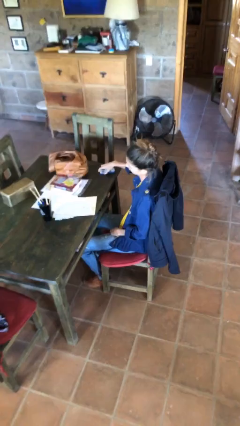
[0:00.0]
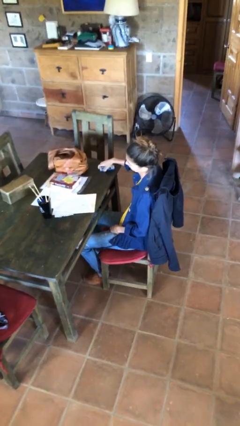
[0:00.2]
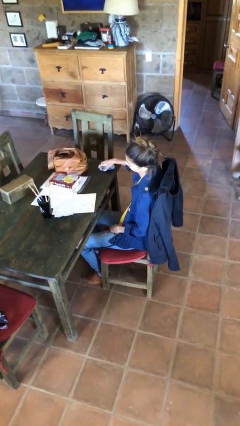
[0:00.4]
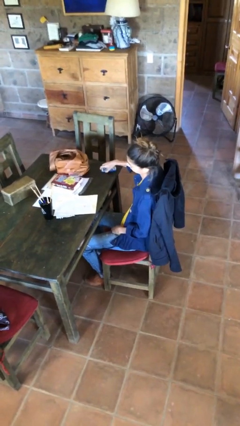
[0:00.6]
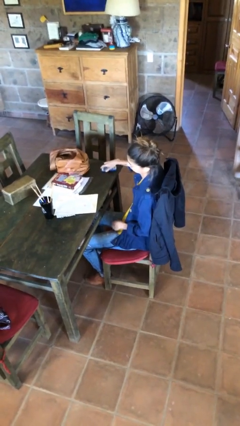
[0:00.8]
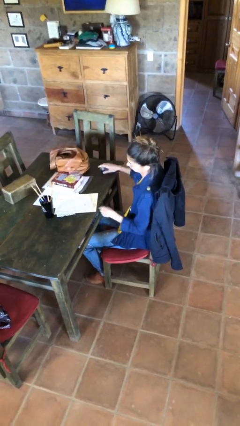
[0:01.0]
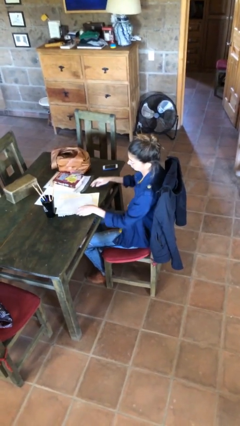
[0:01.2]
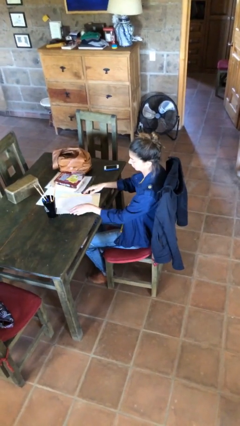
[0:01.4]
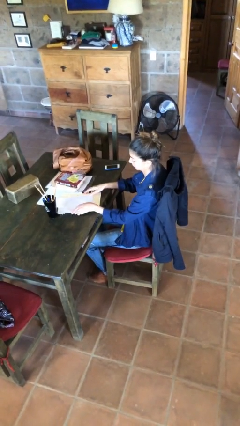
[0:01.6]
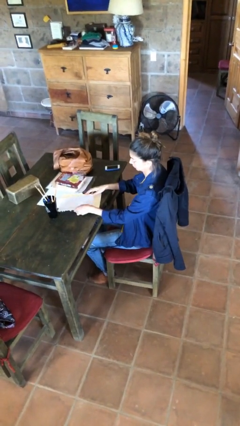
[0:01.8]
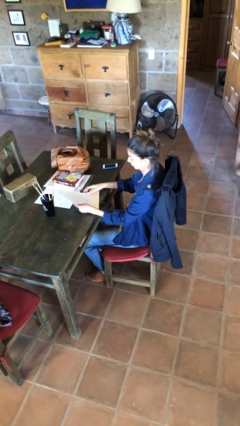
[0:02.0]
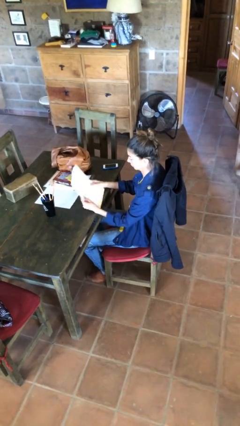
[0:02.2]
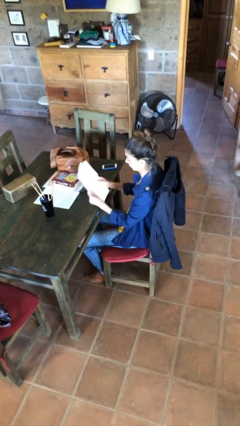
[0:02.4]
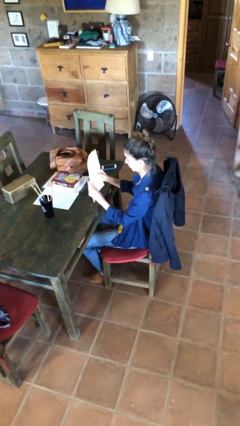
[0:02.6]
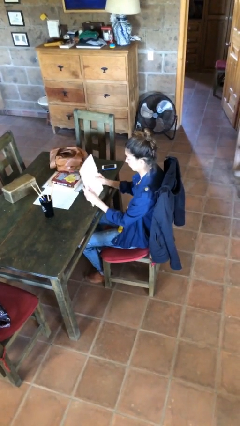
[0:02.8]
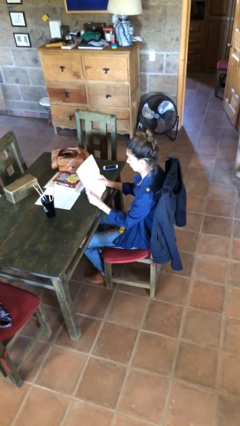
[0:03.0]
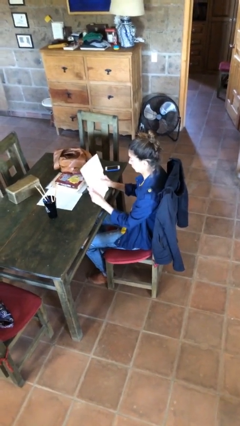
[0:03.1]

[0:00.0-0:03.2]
person picks up object from table

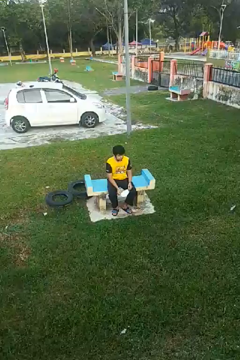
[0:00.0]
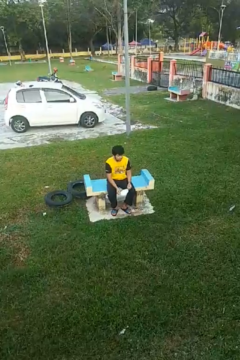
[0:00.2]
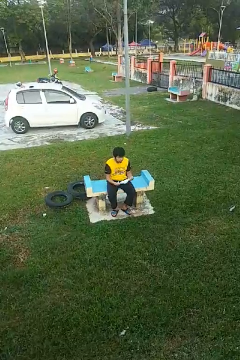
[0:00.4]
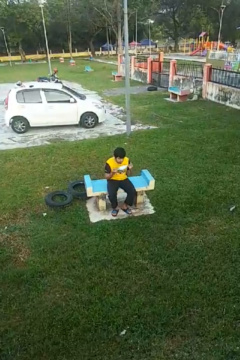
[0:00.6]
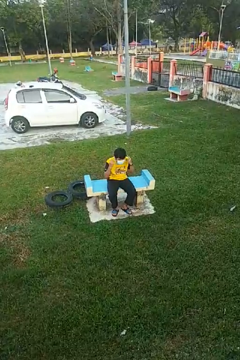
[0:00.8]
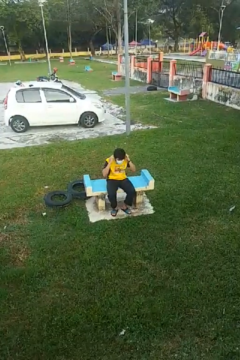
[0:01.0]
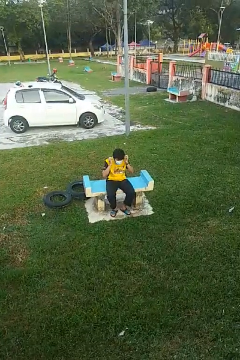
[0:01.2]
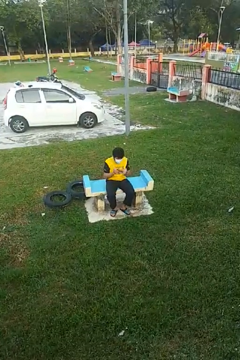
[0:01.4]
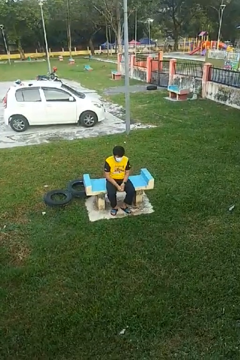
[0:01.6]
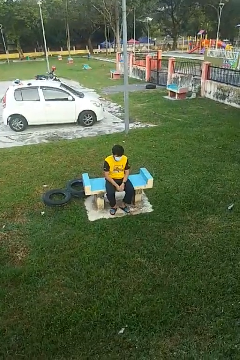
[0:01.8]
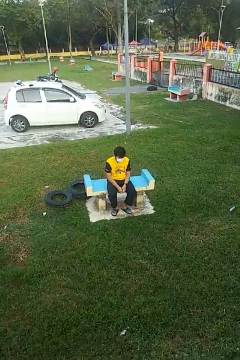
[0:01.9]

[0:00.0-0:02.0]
person puts on facemask

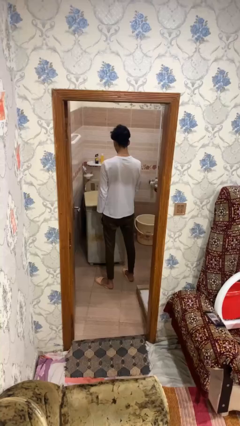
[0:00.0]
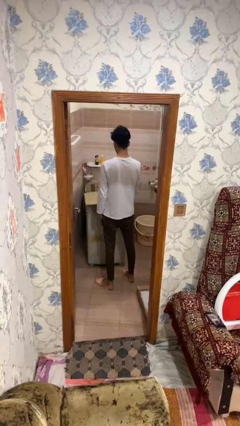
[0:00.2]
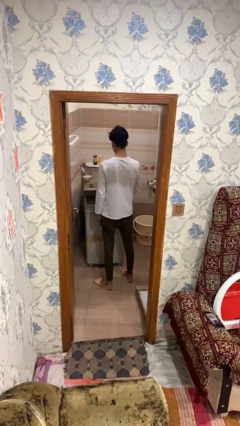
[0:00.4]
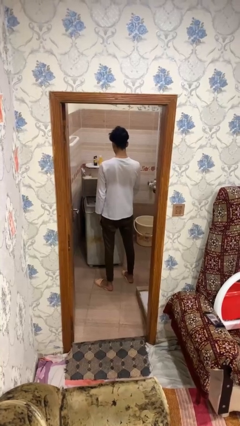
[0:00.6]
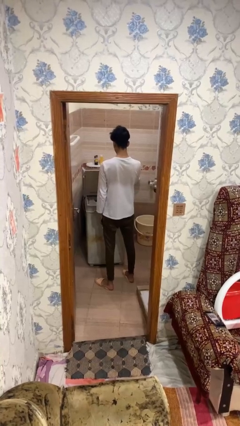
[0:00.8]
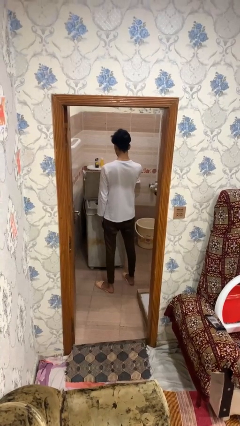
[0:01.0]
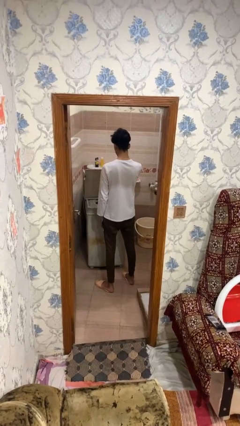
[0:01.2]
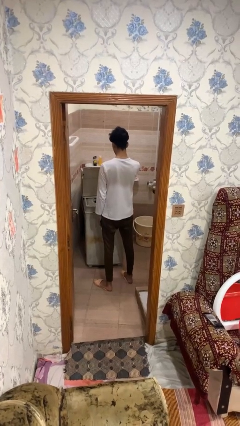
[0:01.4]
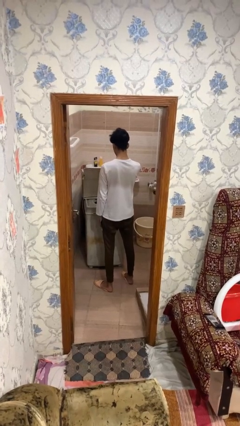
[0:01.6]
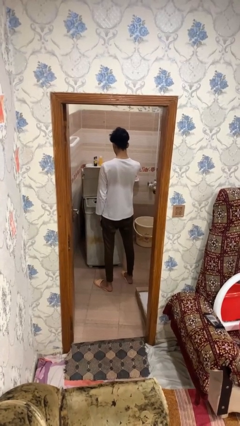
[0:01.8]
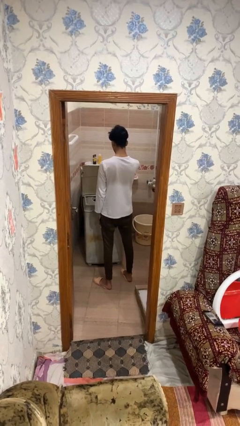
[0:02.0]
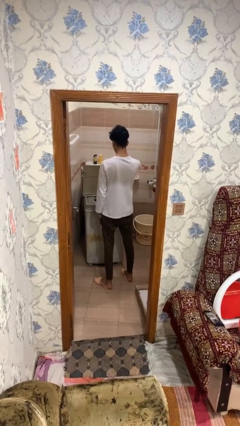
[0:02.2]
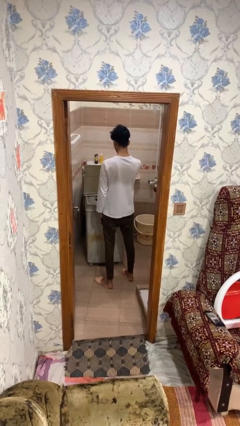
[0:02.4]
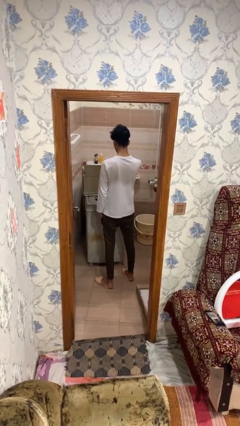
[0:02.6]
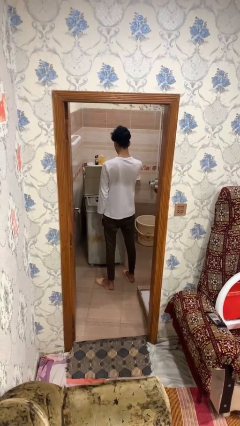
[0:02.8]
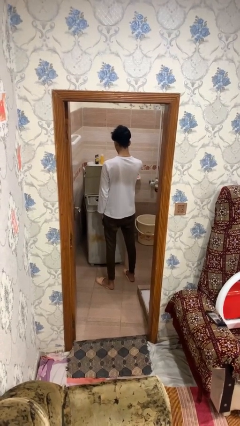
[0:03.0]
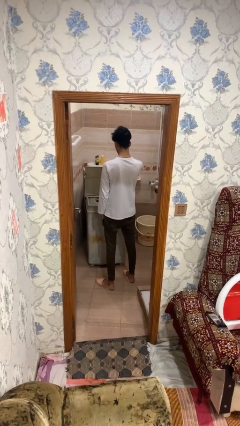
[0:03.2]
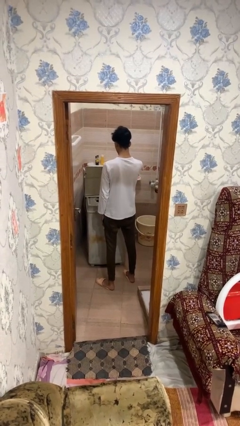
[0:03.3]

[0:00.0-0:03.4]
person opens clothes washer

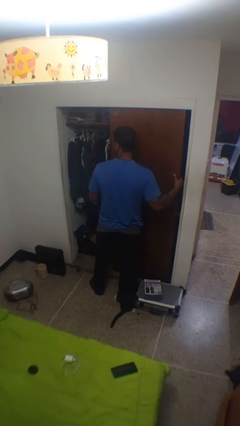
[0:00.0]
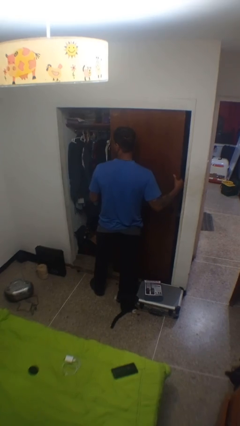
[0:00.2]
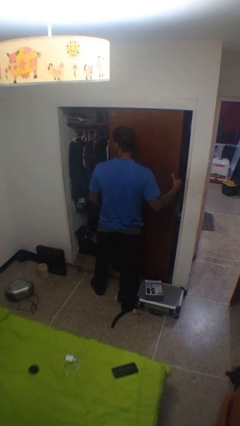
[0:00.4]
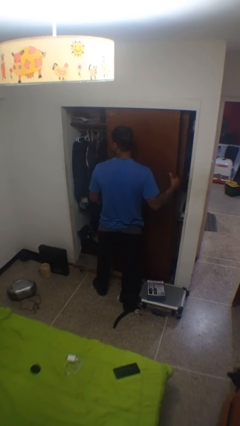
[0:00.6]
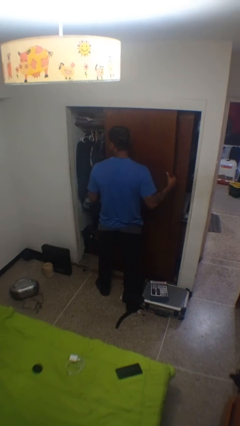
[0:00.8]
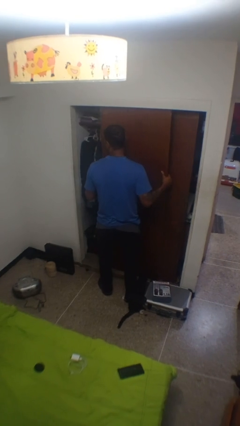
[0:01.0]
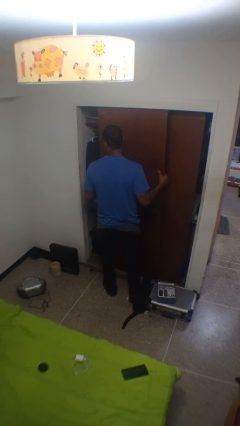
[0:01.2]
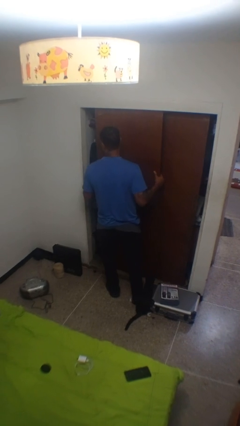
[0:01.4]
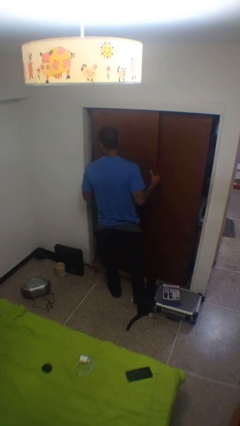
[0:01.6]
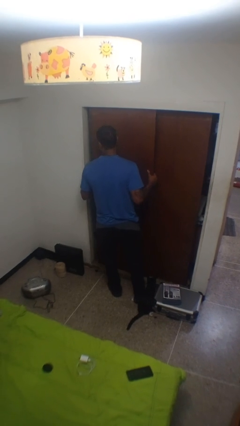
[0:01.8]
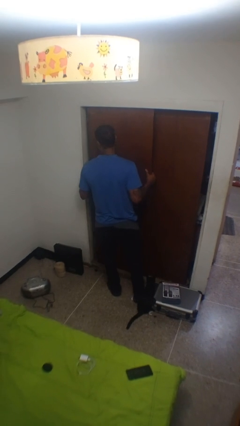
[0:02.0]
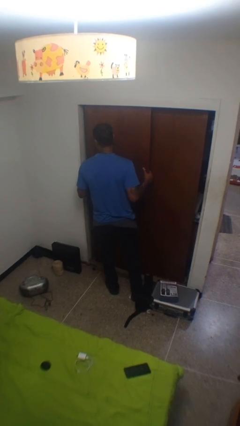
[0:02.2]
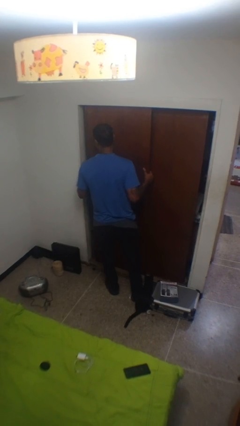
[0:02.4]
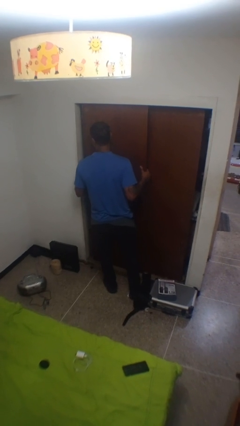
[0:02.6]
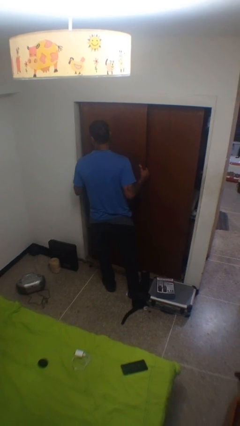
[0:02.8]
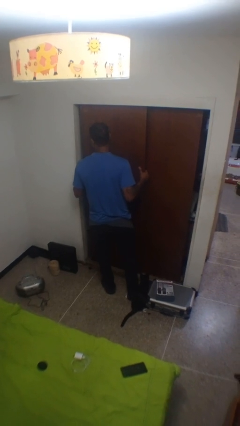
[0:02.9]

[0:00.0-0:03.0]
person closes closet door

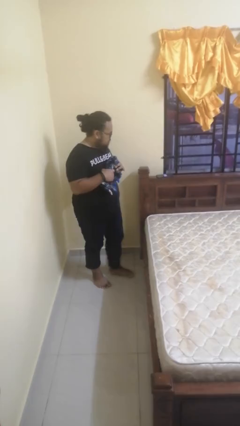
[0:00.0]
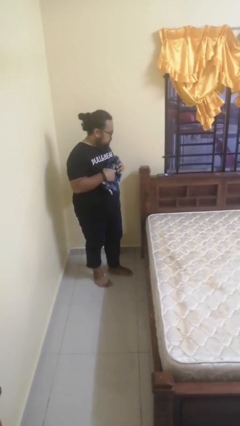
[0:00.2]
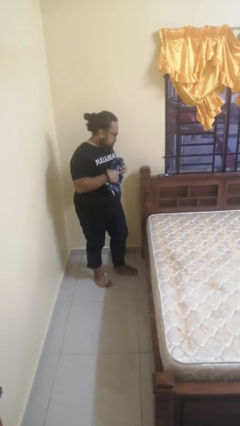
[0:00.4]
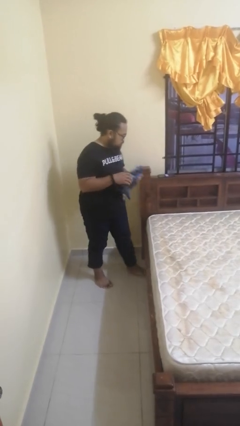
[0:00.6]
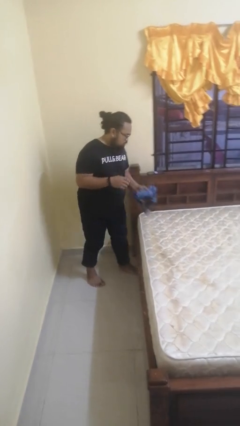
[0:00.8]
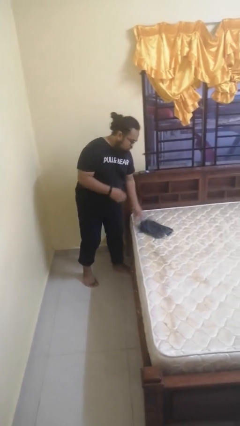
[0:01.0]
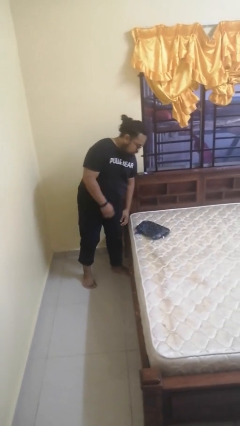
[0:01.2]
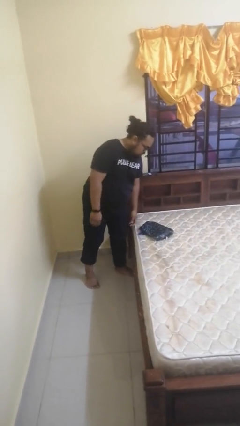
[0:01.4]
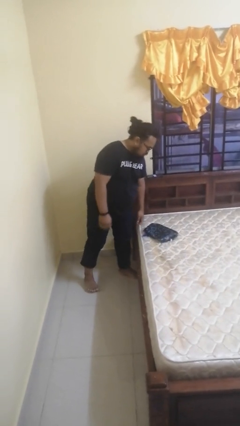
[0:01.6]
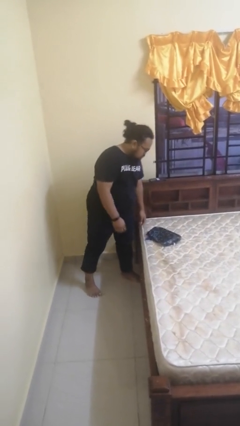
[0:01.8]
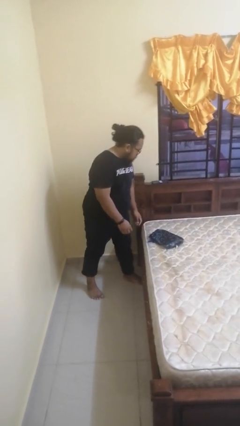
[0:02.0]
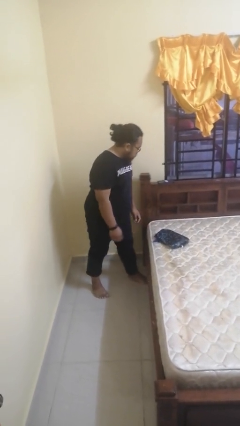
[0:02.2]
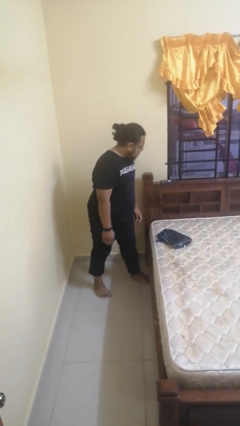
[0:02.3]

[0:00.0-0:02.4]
person puts down object on bed

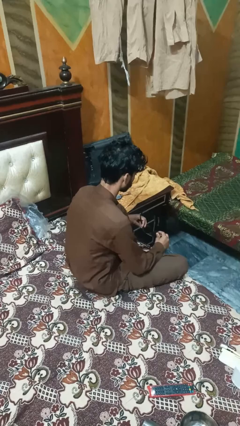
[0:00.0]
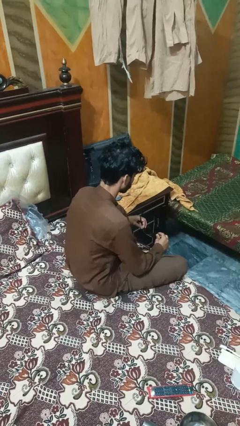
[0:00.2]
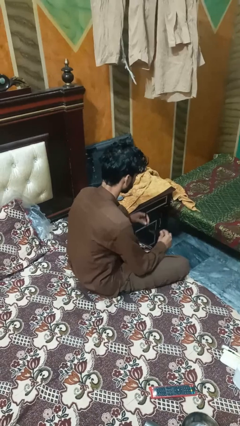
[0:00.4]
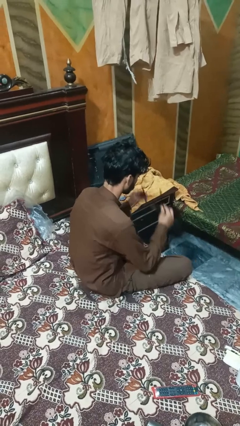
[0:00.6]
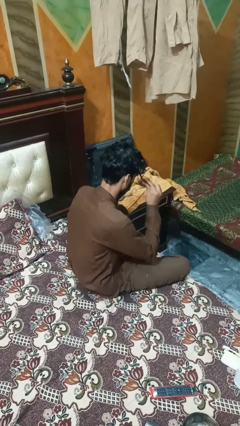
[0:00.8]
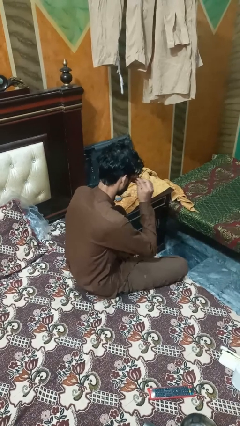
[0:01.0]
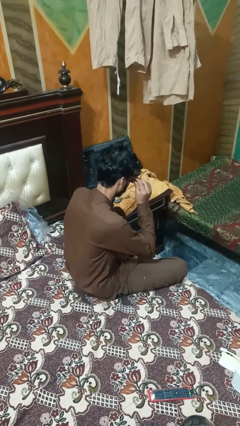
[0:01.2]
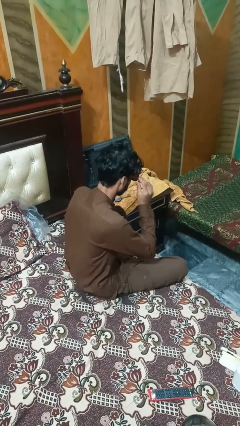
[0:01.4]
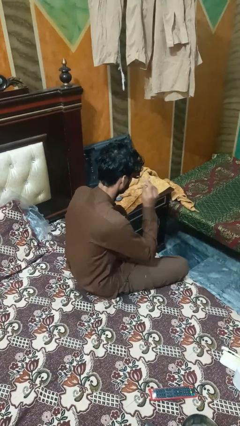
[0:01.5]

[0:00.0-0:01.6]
person puts on sunglasses

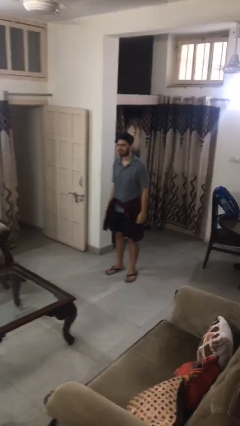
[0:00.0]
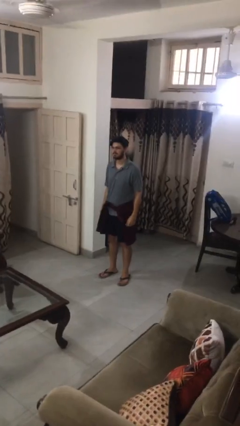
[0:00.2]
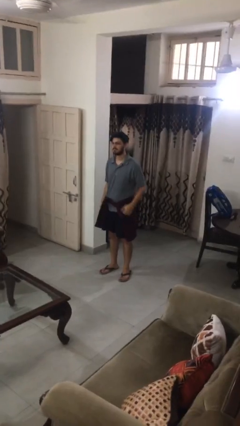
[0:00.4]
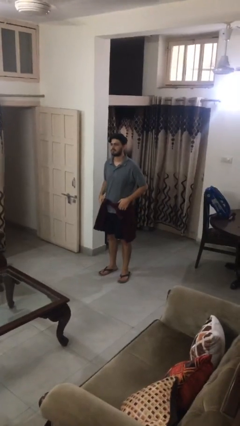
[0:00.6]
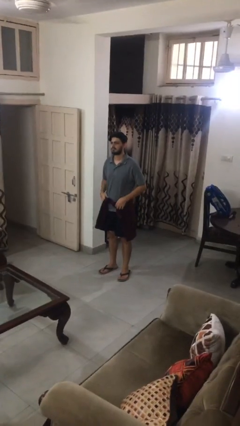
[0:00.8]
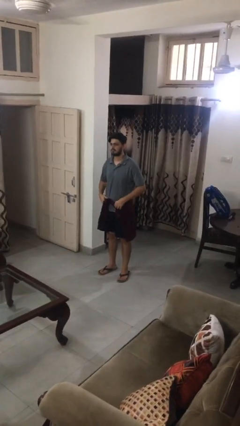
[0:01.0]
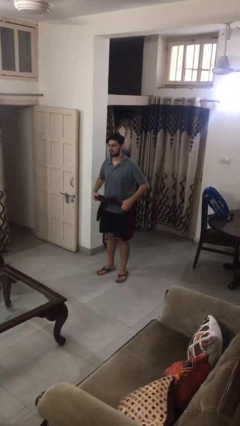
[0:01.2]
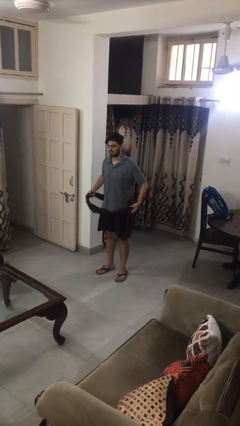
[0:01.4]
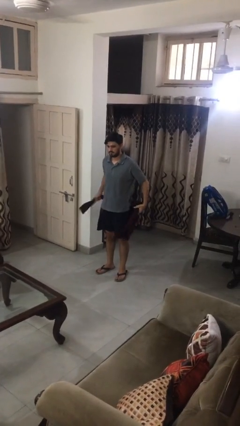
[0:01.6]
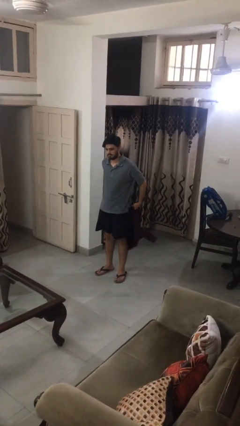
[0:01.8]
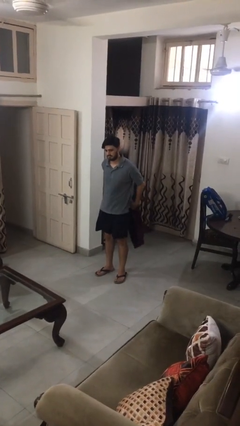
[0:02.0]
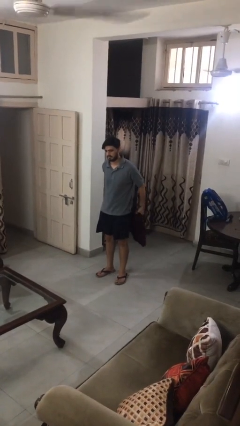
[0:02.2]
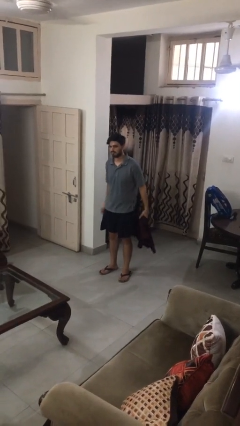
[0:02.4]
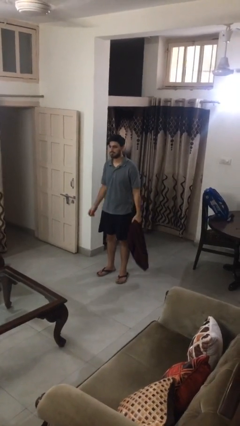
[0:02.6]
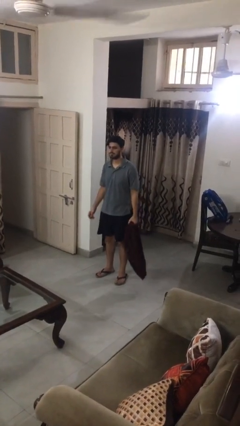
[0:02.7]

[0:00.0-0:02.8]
person unties jacket around waist
